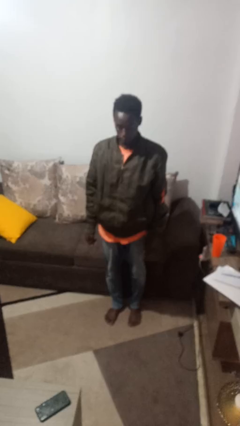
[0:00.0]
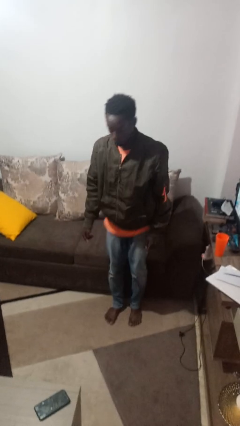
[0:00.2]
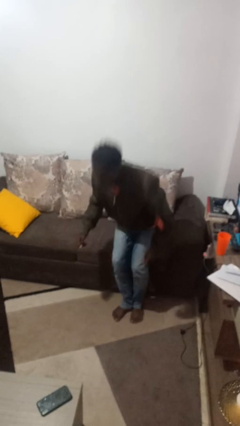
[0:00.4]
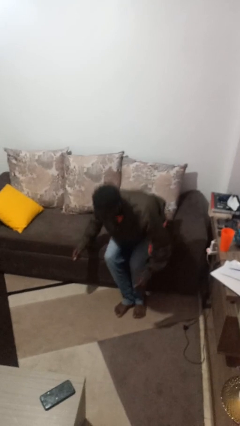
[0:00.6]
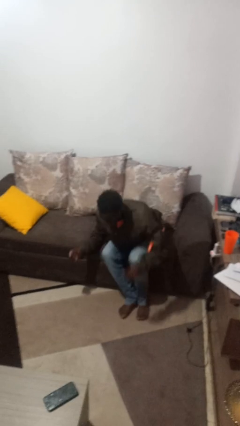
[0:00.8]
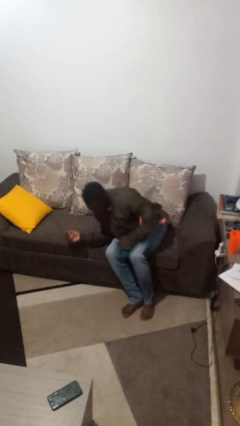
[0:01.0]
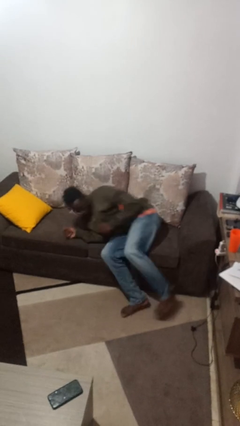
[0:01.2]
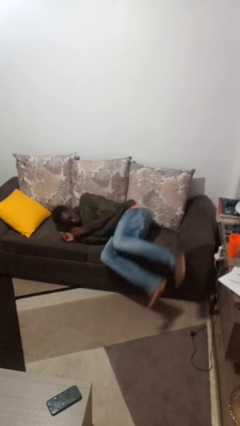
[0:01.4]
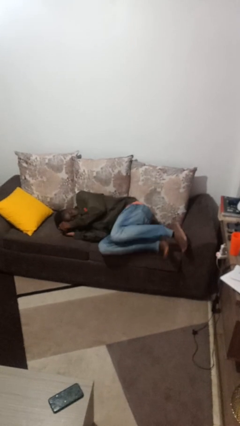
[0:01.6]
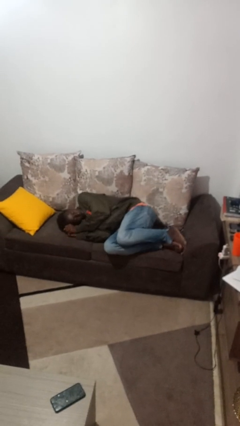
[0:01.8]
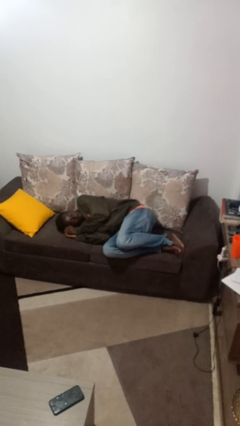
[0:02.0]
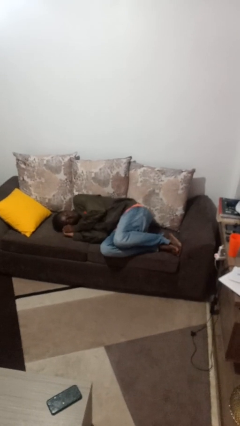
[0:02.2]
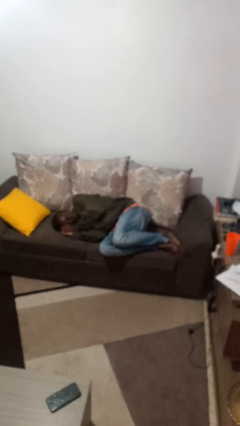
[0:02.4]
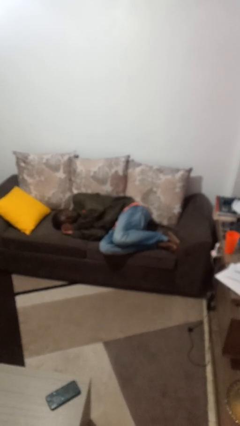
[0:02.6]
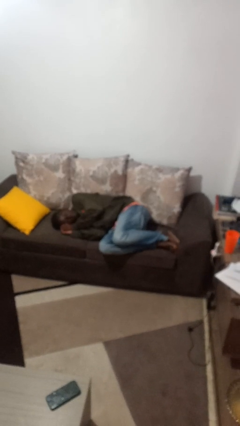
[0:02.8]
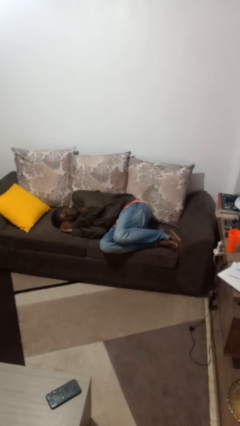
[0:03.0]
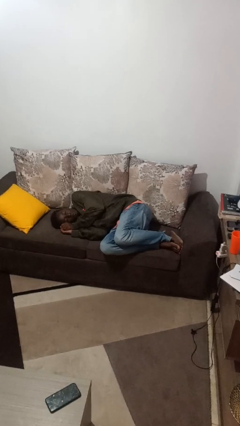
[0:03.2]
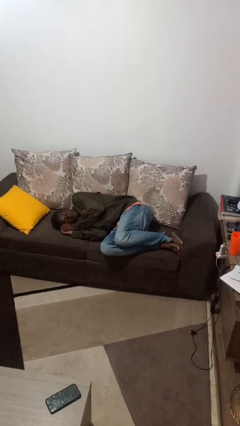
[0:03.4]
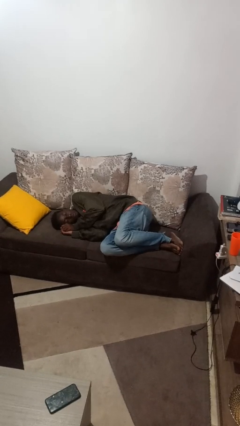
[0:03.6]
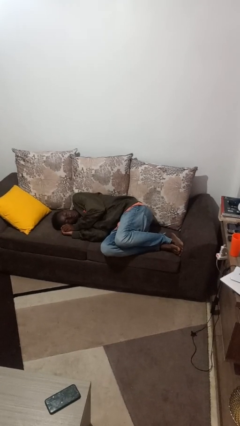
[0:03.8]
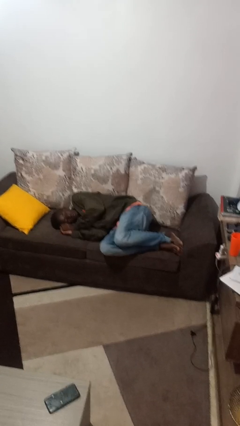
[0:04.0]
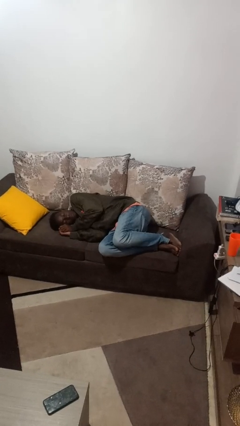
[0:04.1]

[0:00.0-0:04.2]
person lies down on couch

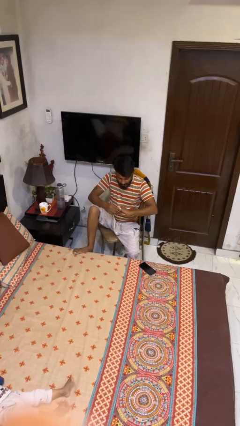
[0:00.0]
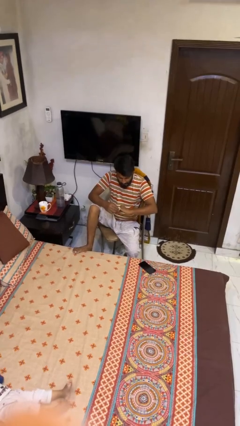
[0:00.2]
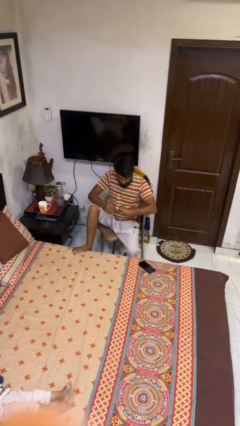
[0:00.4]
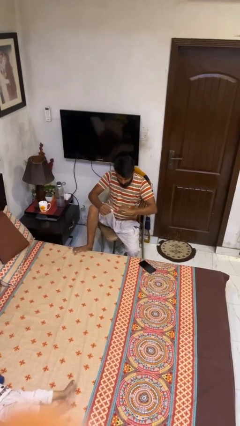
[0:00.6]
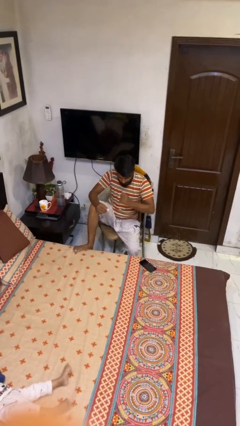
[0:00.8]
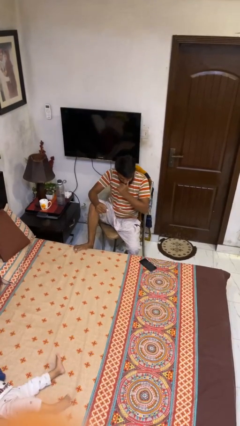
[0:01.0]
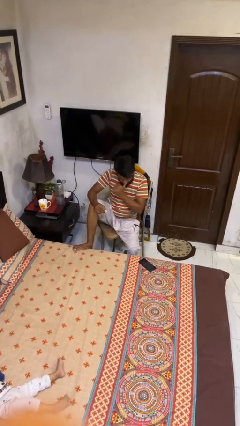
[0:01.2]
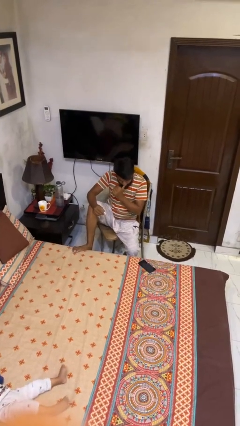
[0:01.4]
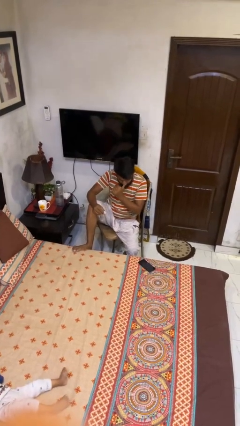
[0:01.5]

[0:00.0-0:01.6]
person takes off ring

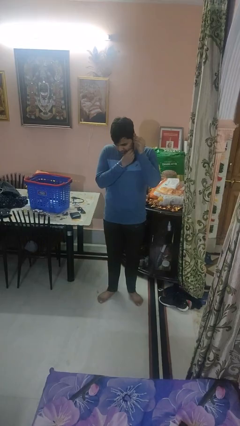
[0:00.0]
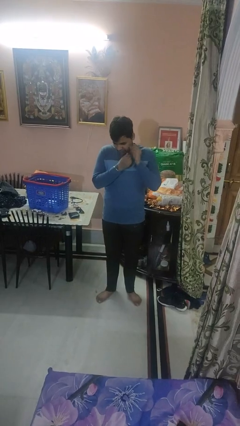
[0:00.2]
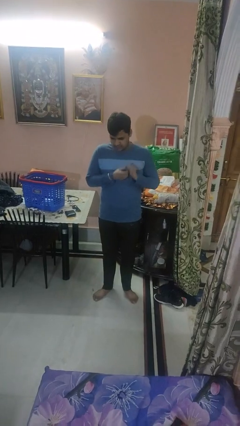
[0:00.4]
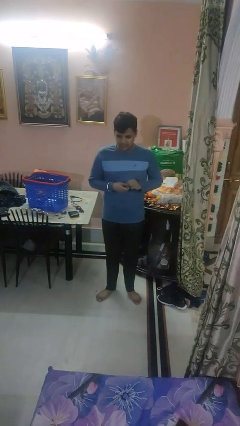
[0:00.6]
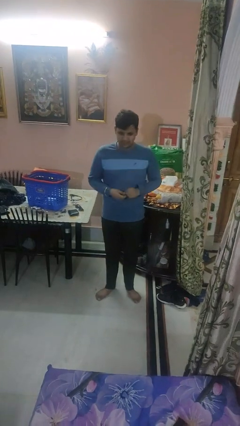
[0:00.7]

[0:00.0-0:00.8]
person takes off earrings

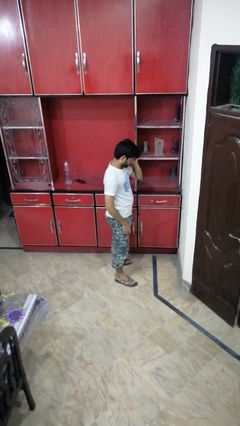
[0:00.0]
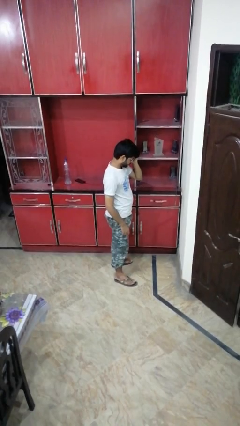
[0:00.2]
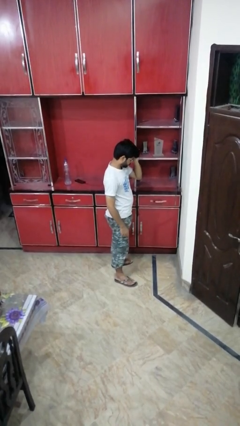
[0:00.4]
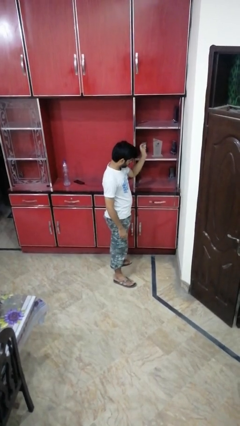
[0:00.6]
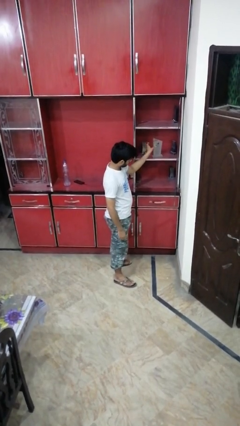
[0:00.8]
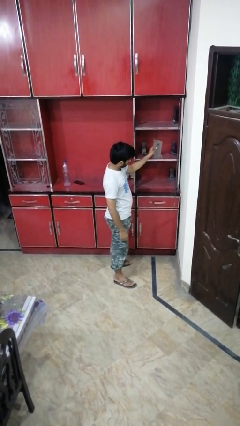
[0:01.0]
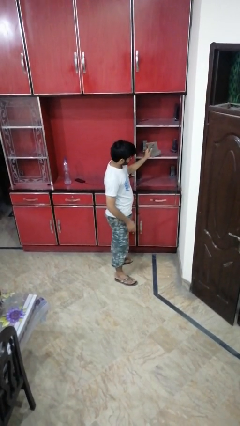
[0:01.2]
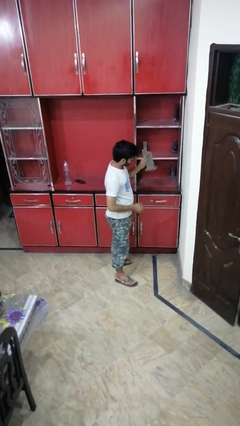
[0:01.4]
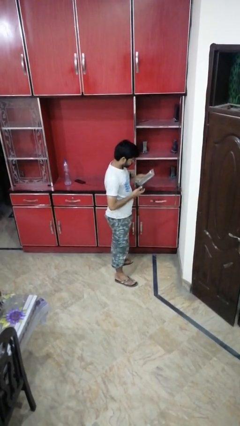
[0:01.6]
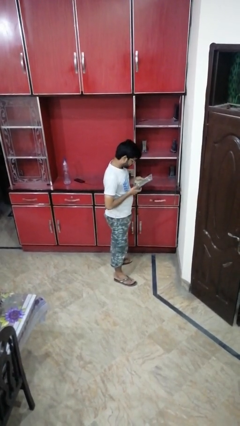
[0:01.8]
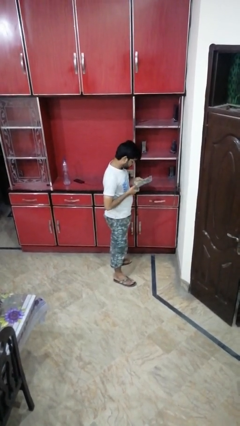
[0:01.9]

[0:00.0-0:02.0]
person picks up object from cabinet

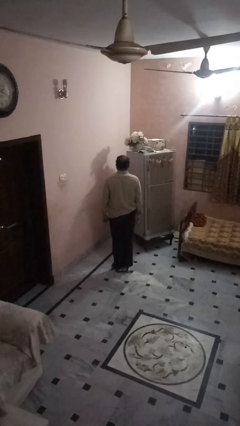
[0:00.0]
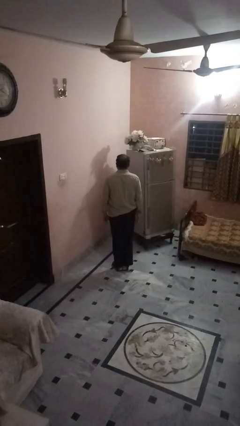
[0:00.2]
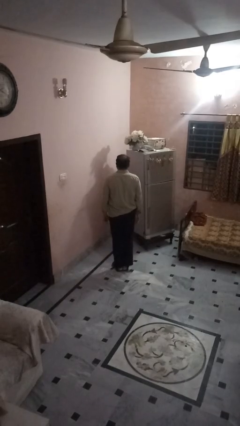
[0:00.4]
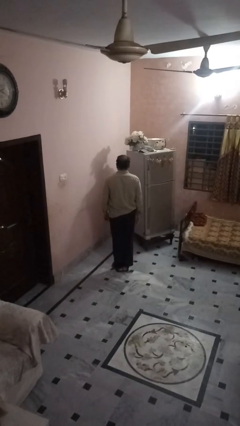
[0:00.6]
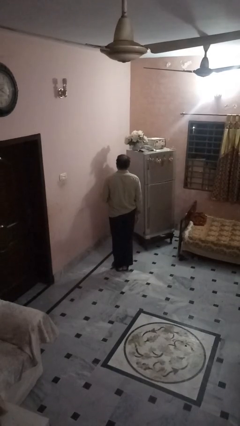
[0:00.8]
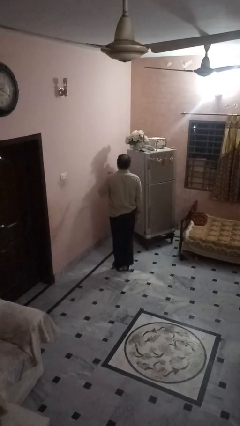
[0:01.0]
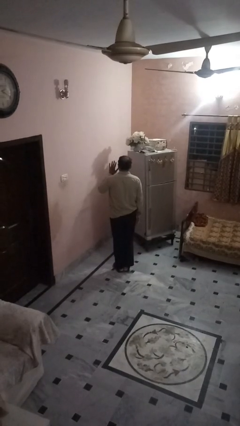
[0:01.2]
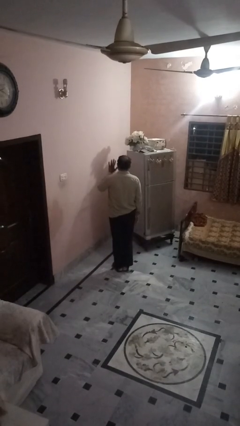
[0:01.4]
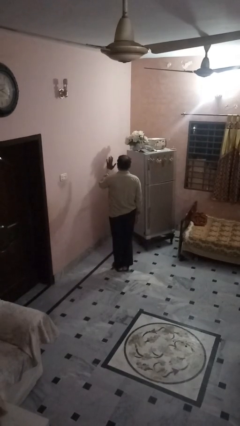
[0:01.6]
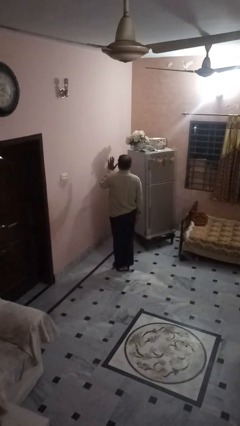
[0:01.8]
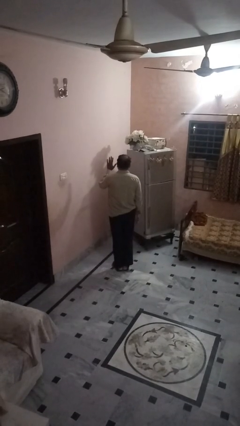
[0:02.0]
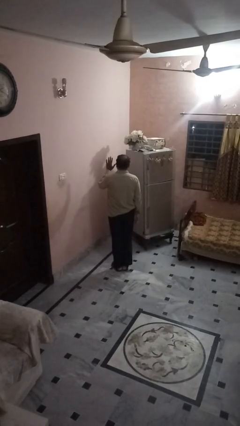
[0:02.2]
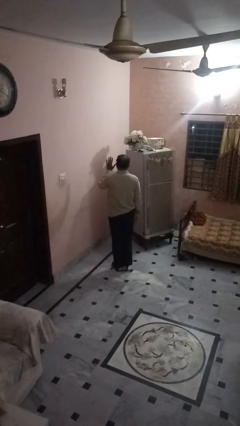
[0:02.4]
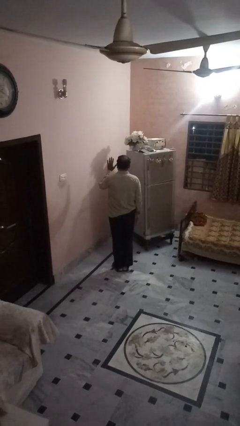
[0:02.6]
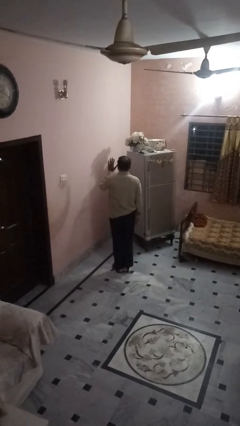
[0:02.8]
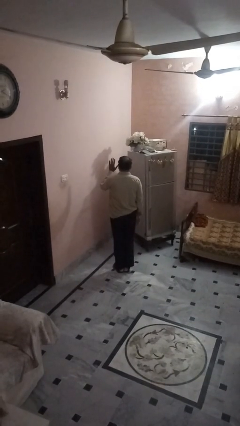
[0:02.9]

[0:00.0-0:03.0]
person gestures number five

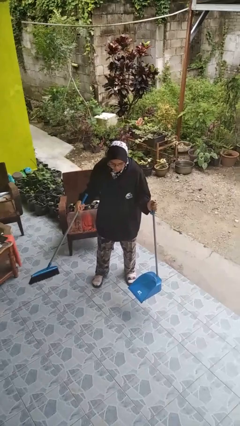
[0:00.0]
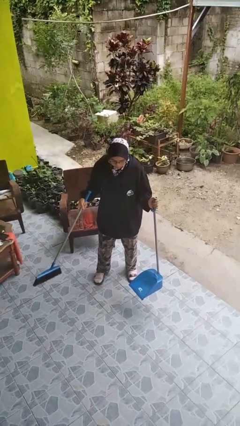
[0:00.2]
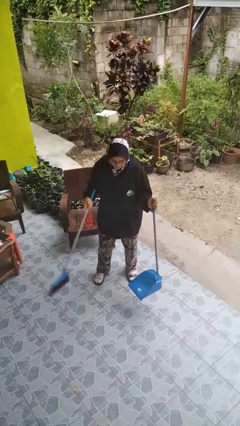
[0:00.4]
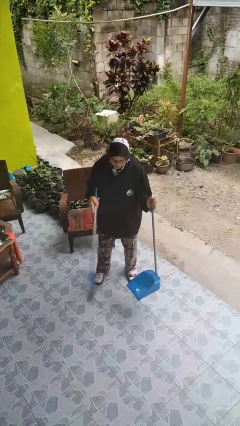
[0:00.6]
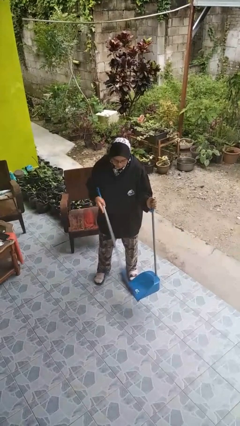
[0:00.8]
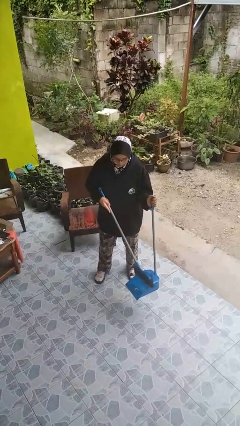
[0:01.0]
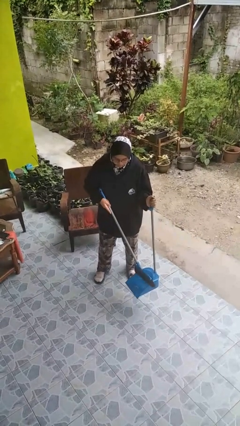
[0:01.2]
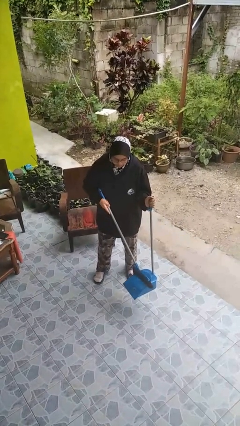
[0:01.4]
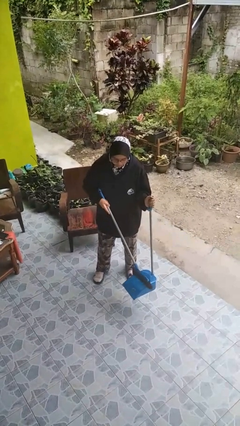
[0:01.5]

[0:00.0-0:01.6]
person sweeps floor

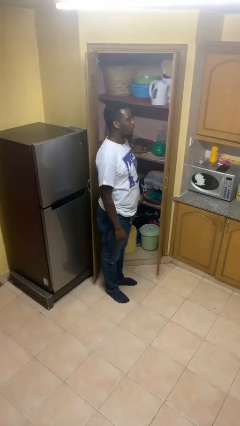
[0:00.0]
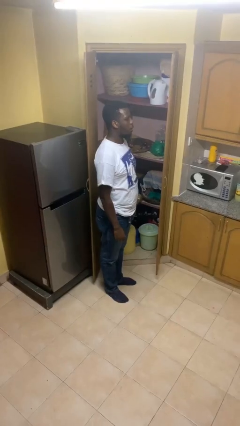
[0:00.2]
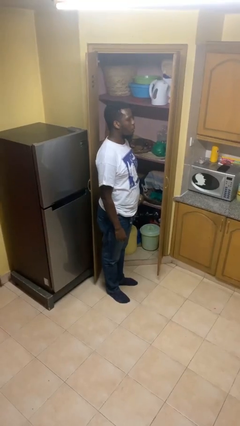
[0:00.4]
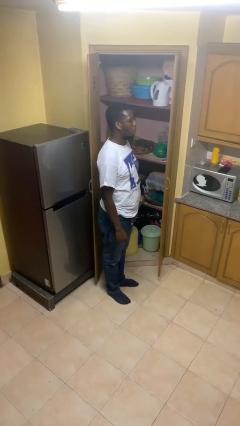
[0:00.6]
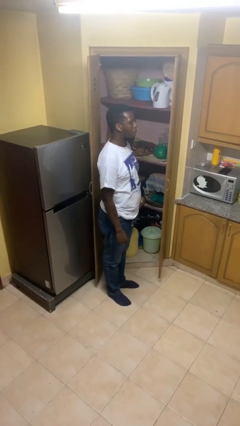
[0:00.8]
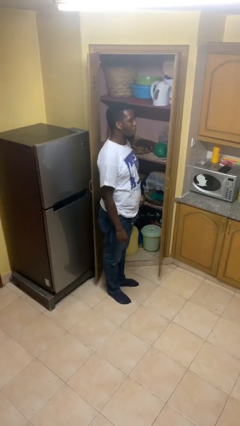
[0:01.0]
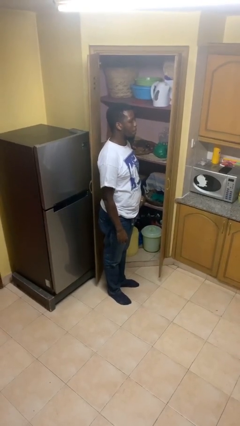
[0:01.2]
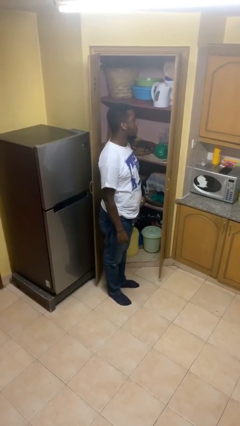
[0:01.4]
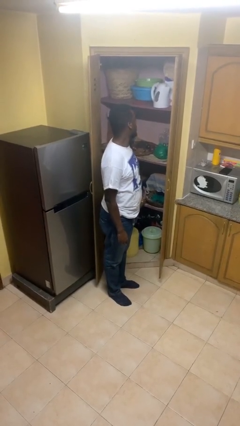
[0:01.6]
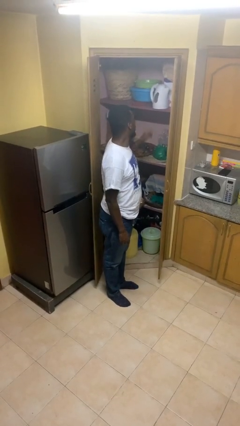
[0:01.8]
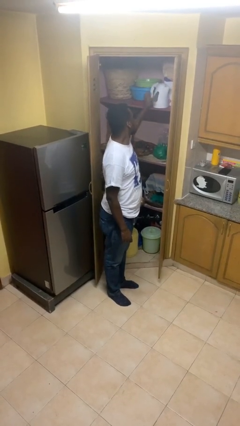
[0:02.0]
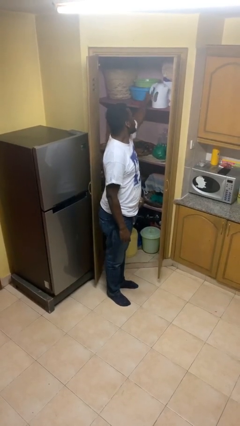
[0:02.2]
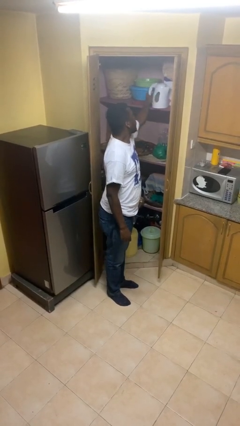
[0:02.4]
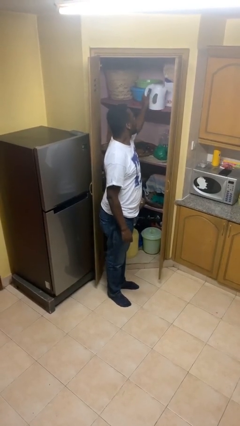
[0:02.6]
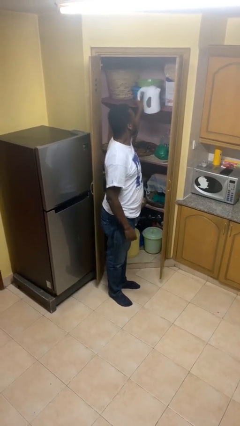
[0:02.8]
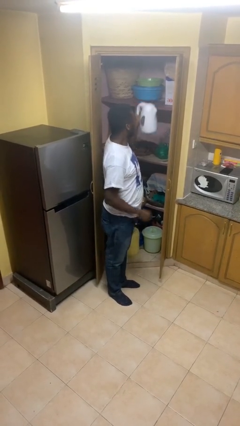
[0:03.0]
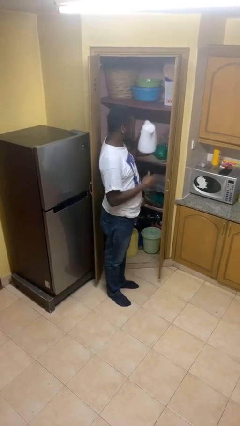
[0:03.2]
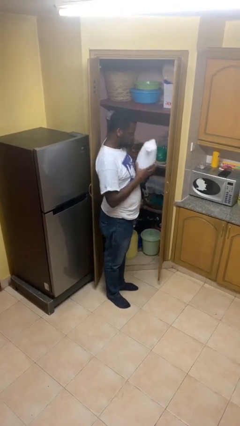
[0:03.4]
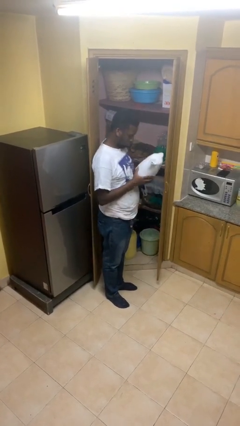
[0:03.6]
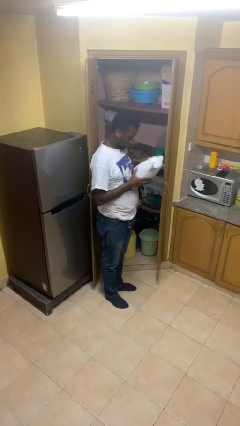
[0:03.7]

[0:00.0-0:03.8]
person picks up object from shelf
